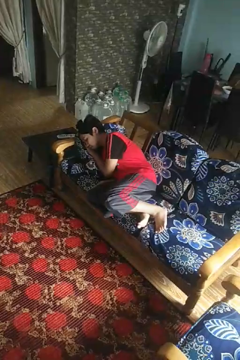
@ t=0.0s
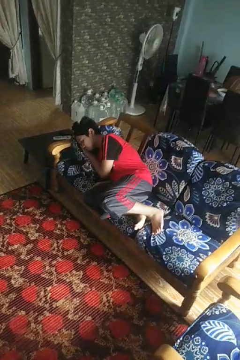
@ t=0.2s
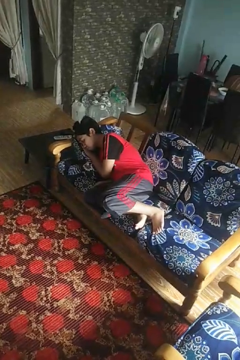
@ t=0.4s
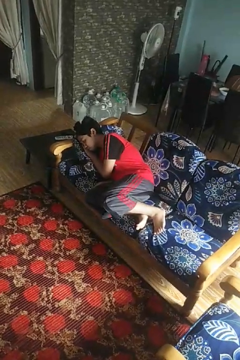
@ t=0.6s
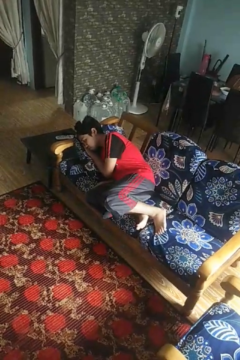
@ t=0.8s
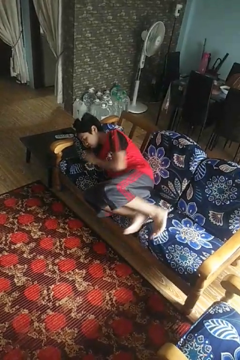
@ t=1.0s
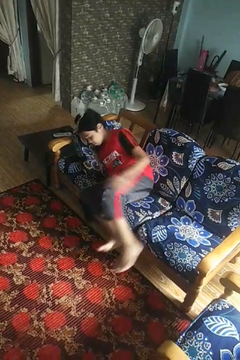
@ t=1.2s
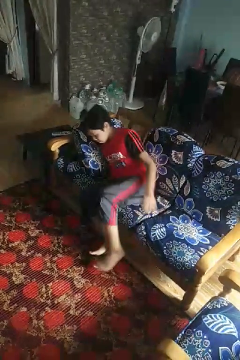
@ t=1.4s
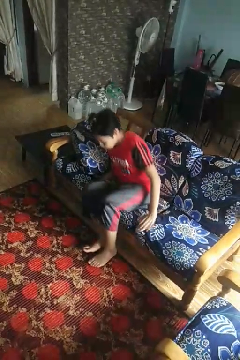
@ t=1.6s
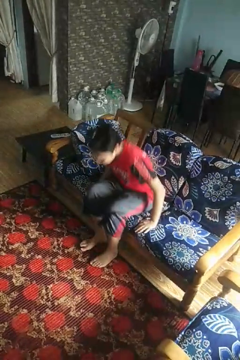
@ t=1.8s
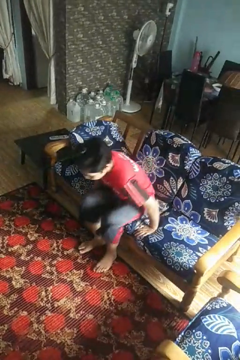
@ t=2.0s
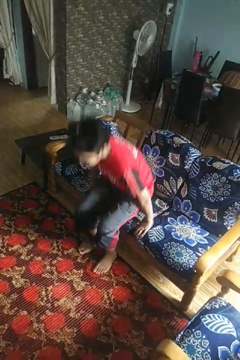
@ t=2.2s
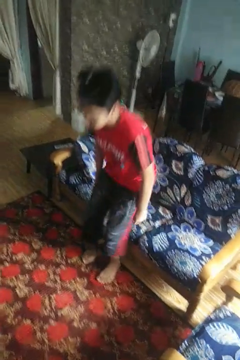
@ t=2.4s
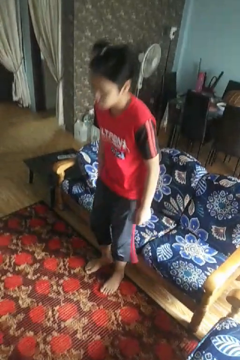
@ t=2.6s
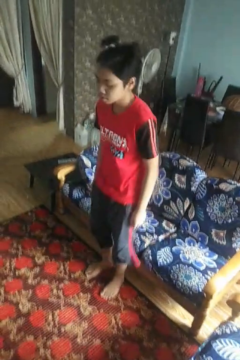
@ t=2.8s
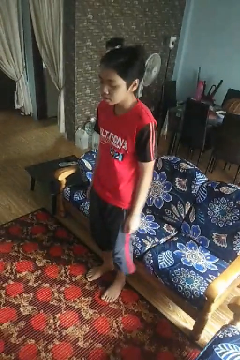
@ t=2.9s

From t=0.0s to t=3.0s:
person stands up

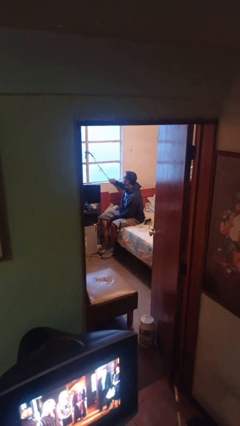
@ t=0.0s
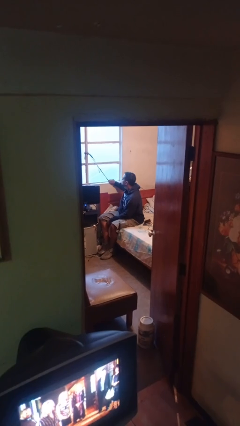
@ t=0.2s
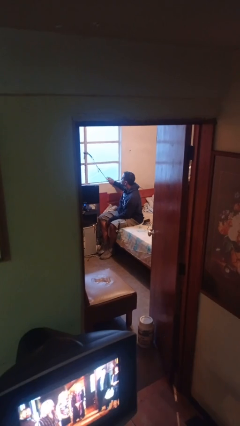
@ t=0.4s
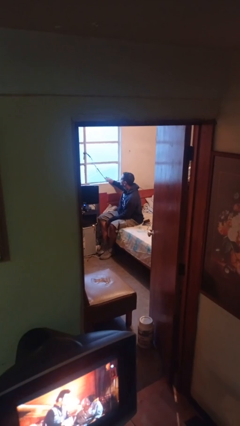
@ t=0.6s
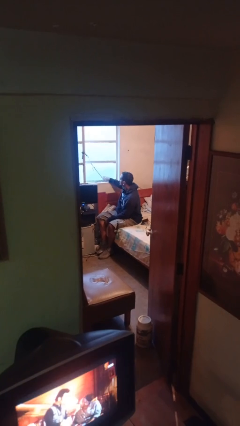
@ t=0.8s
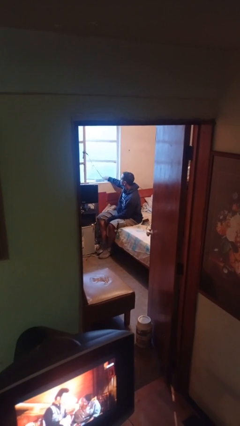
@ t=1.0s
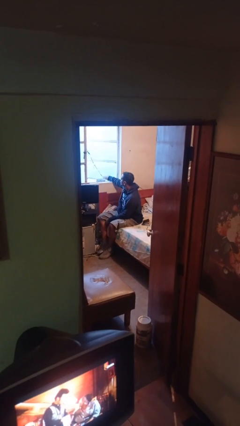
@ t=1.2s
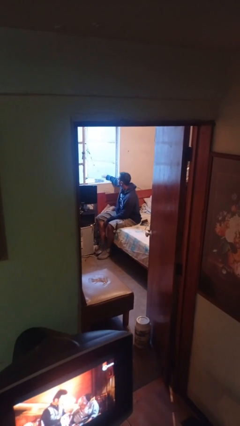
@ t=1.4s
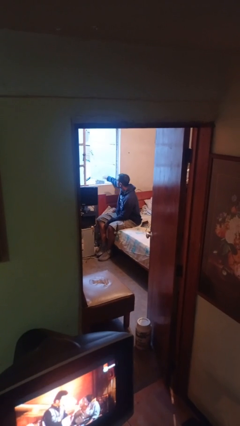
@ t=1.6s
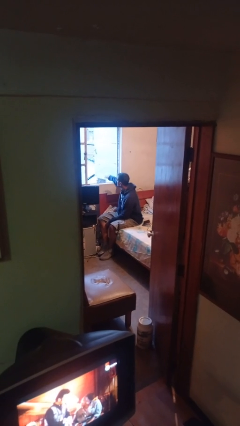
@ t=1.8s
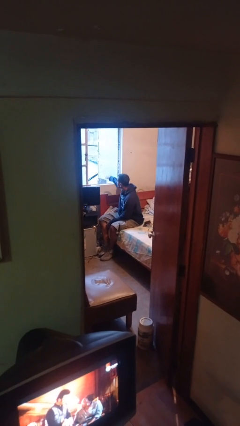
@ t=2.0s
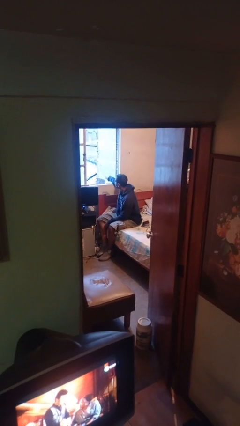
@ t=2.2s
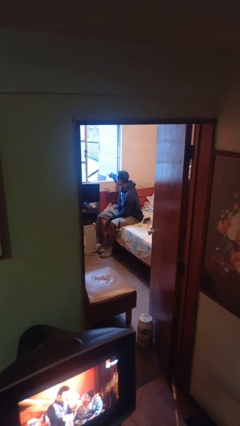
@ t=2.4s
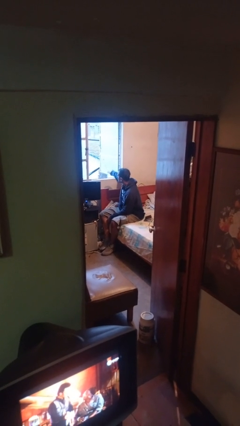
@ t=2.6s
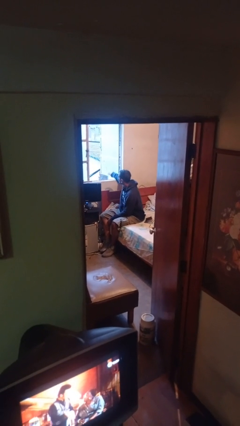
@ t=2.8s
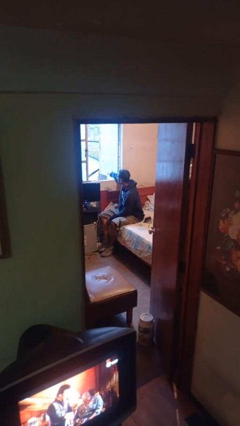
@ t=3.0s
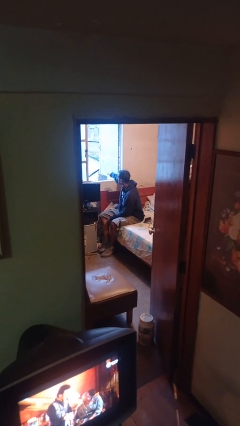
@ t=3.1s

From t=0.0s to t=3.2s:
person opens home window

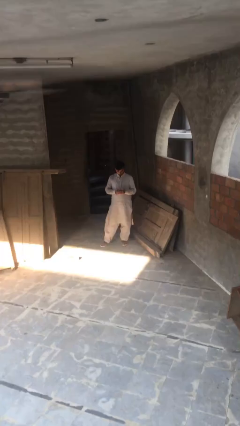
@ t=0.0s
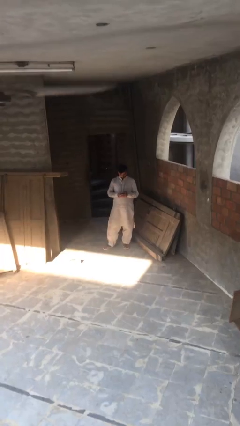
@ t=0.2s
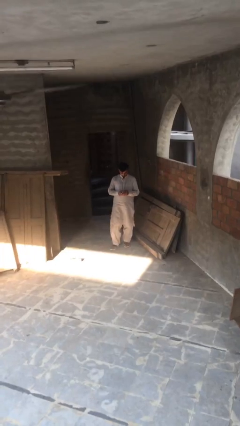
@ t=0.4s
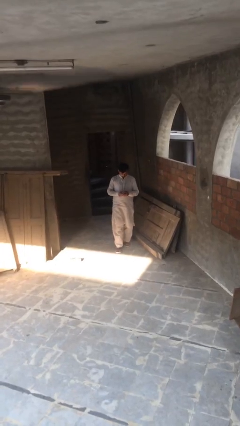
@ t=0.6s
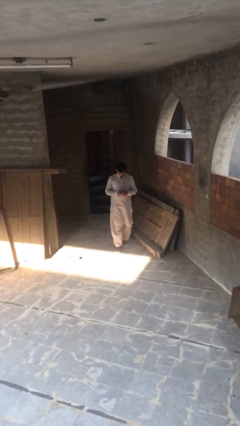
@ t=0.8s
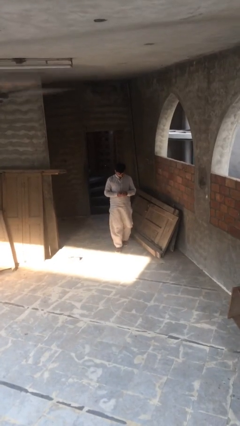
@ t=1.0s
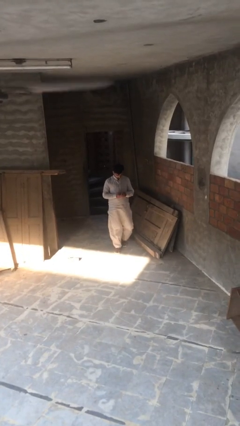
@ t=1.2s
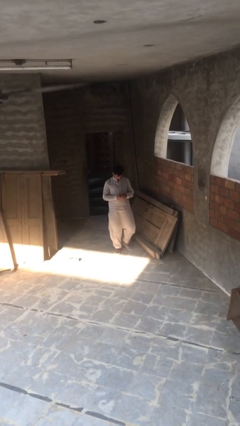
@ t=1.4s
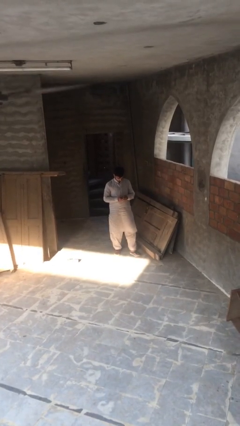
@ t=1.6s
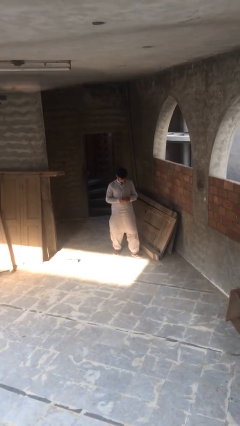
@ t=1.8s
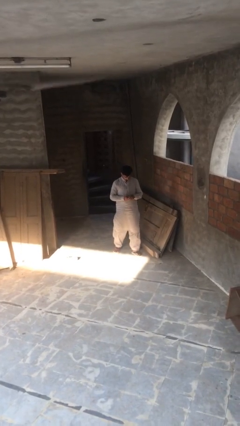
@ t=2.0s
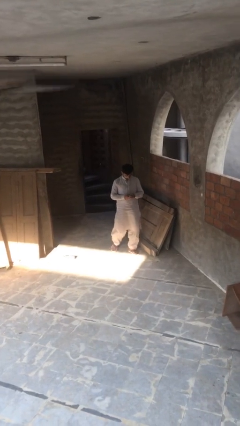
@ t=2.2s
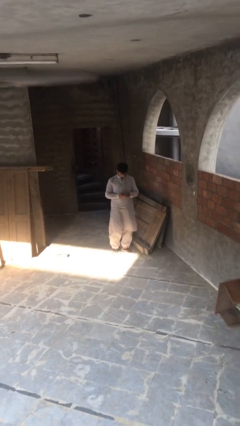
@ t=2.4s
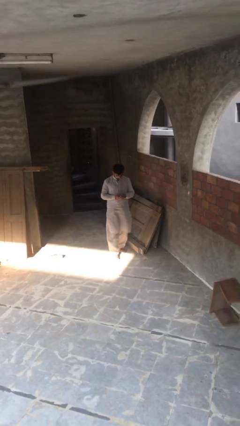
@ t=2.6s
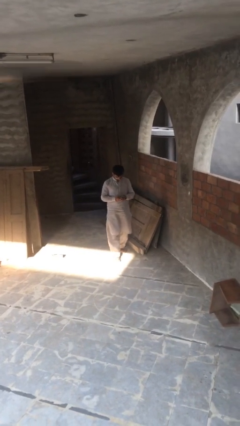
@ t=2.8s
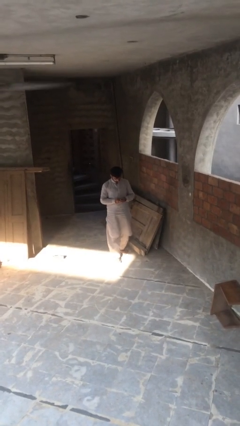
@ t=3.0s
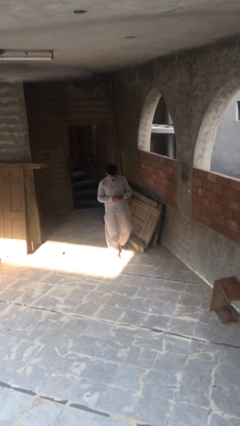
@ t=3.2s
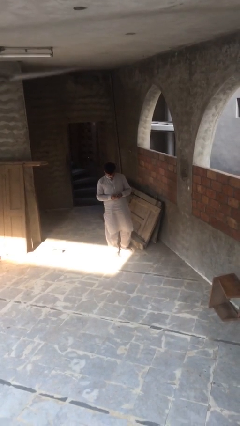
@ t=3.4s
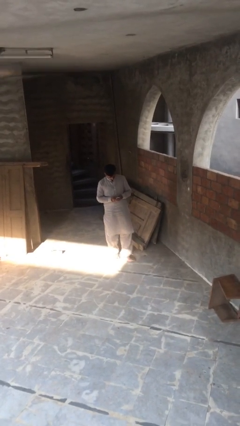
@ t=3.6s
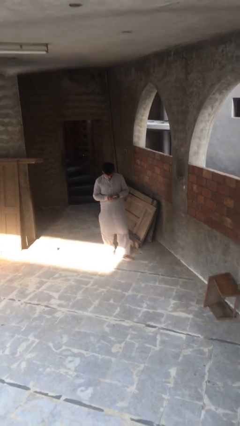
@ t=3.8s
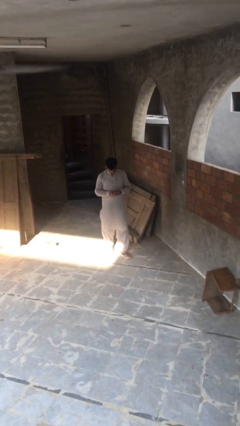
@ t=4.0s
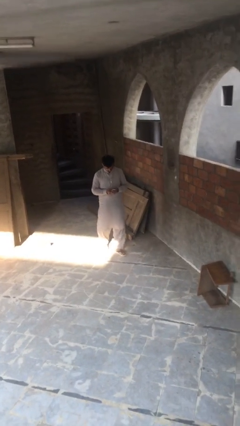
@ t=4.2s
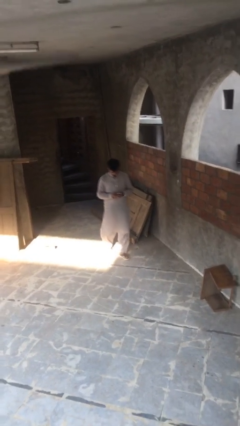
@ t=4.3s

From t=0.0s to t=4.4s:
person texts on phone

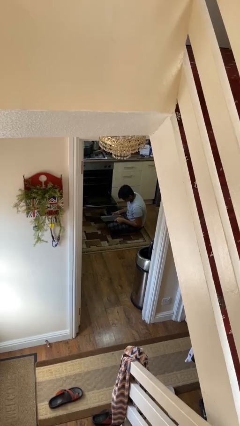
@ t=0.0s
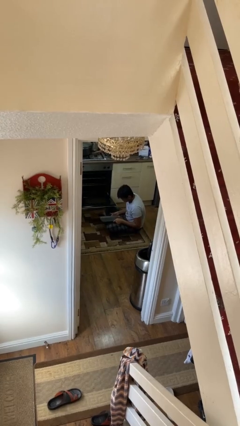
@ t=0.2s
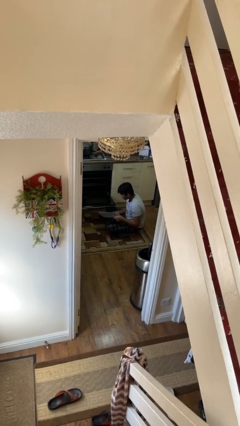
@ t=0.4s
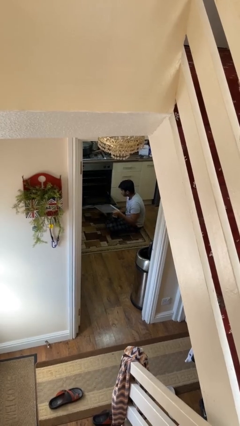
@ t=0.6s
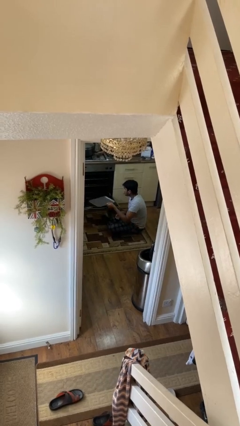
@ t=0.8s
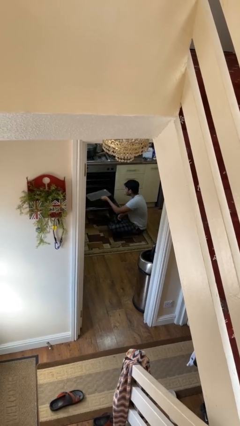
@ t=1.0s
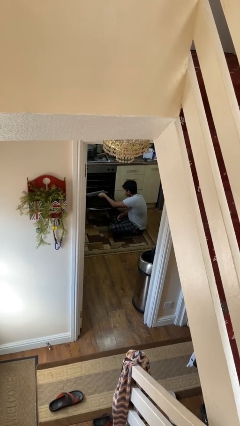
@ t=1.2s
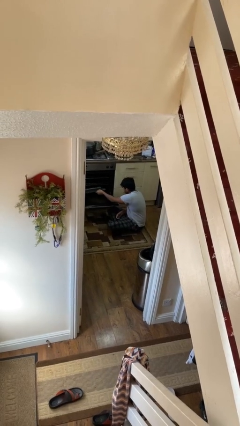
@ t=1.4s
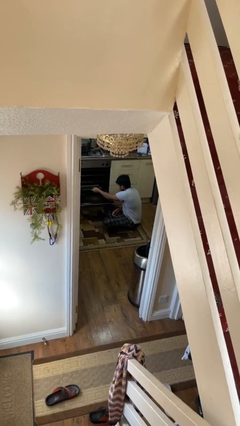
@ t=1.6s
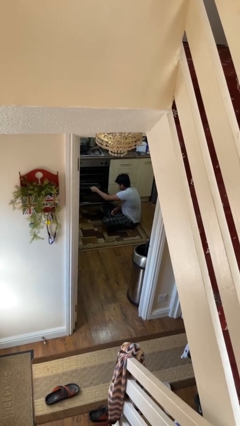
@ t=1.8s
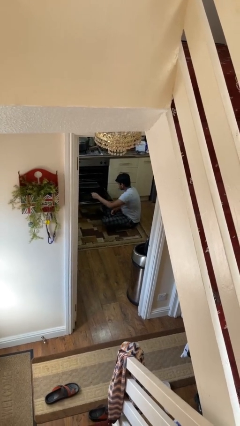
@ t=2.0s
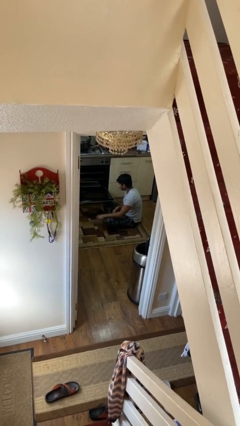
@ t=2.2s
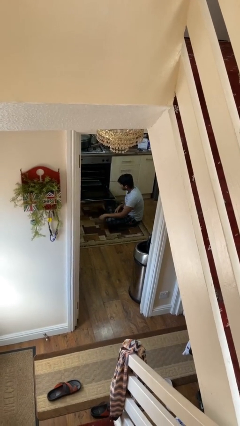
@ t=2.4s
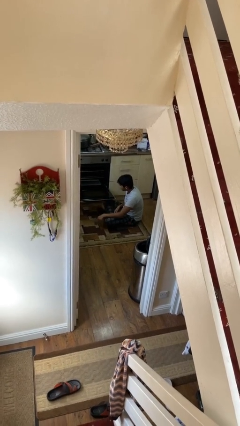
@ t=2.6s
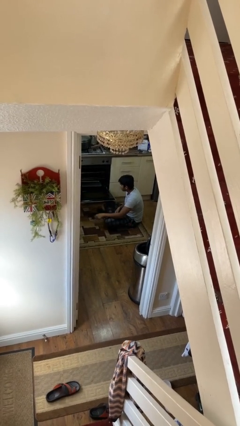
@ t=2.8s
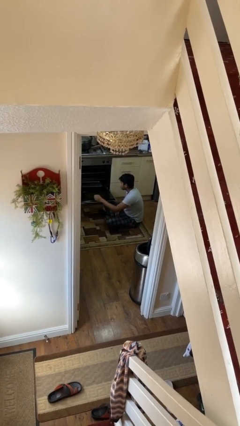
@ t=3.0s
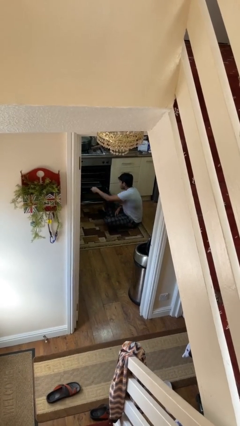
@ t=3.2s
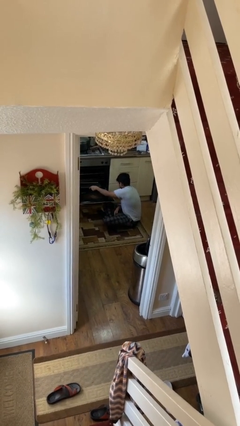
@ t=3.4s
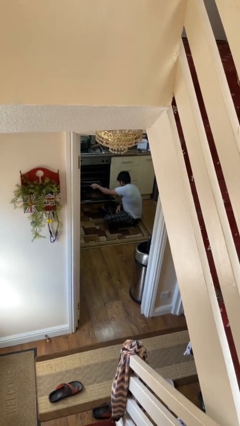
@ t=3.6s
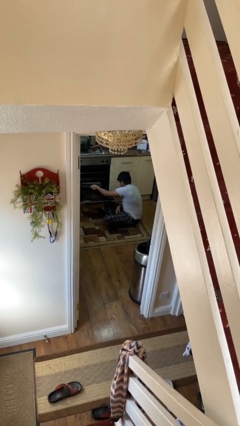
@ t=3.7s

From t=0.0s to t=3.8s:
person puts object into oven

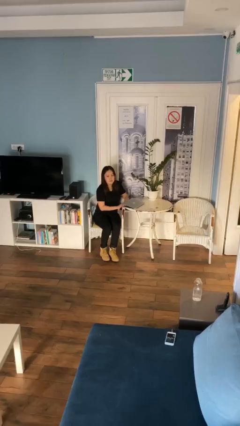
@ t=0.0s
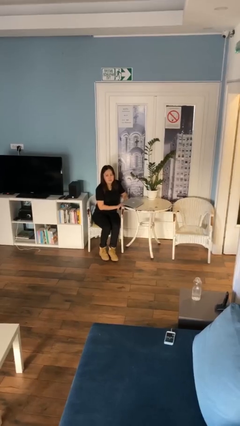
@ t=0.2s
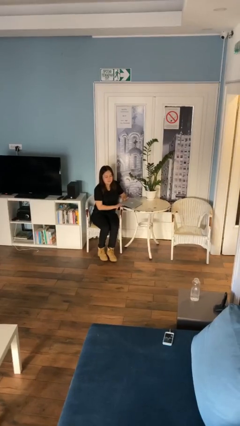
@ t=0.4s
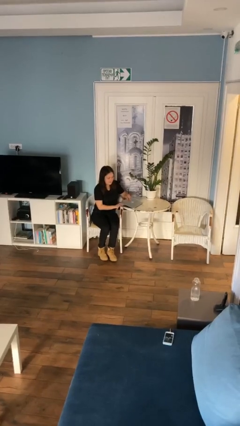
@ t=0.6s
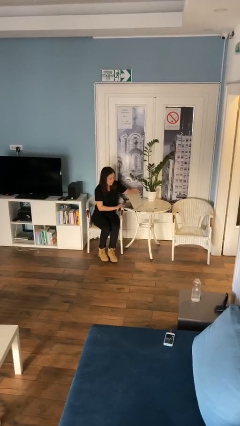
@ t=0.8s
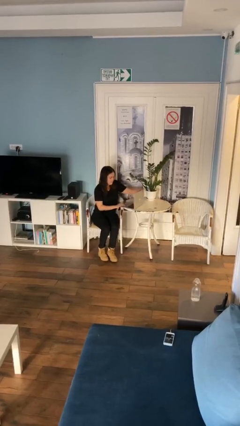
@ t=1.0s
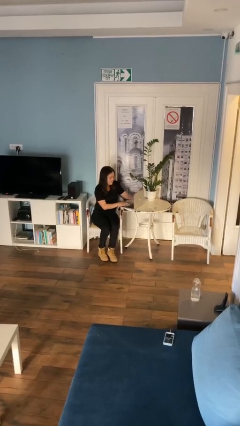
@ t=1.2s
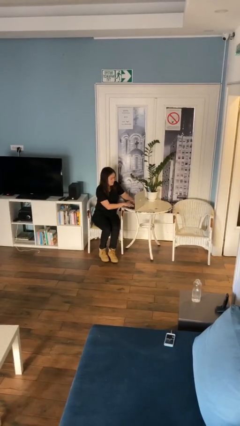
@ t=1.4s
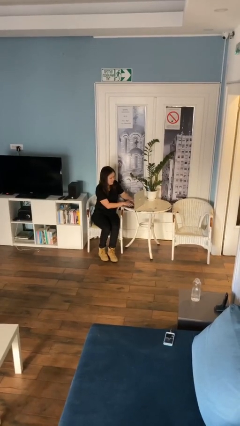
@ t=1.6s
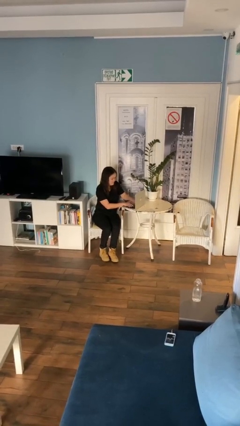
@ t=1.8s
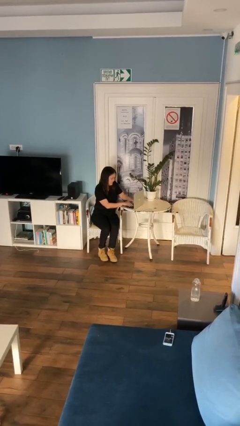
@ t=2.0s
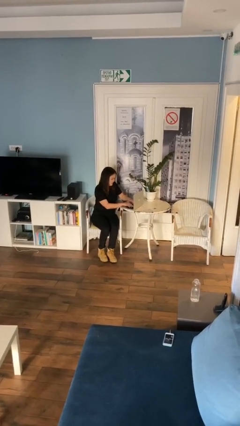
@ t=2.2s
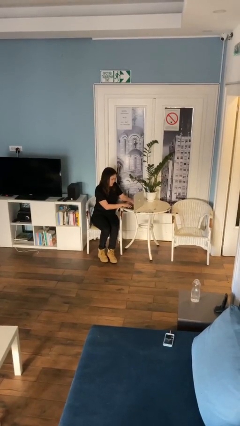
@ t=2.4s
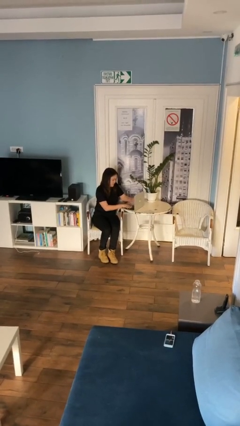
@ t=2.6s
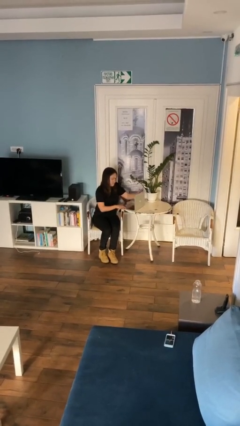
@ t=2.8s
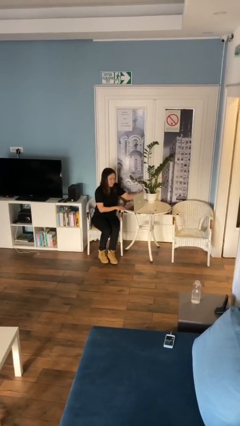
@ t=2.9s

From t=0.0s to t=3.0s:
person interacts with laptop
